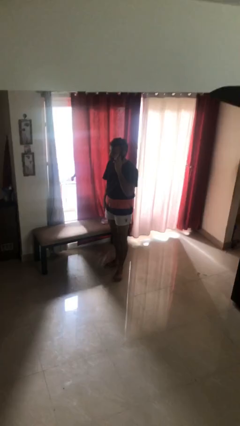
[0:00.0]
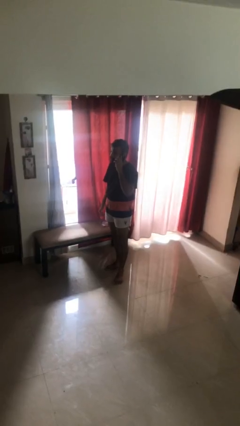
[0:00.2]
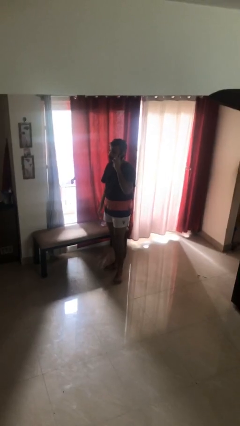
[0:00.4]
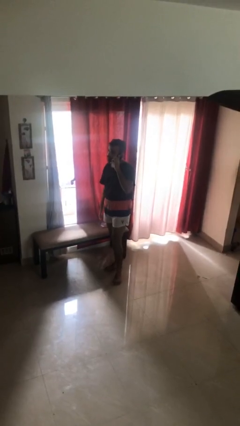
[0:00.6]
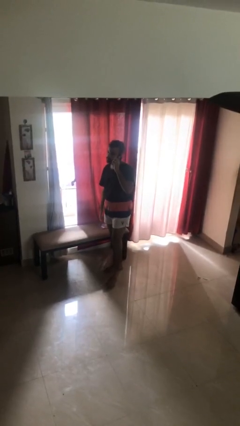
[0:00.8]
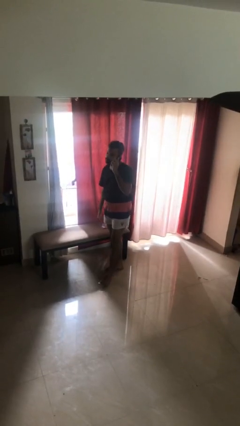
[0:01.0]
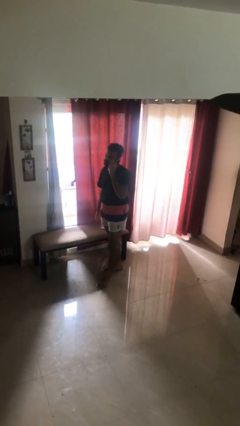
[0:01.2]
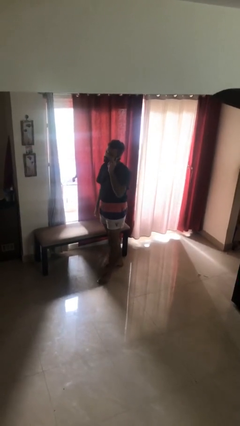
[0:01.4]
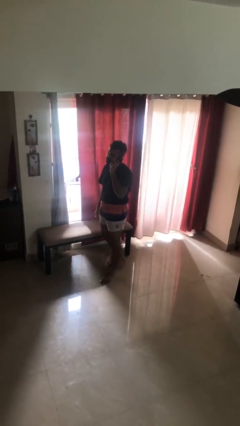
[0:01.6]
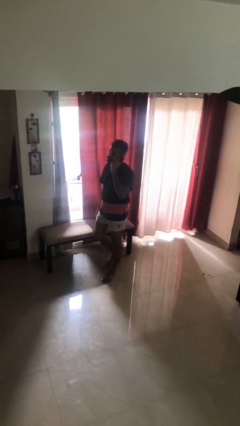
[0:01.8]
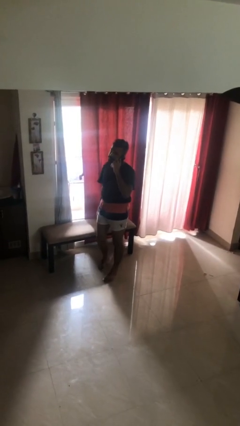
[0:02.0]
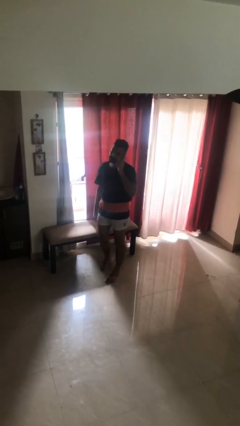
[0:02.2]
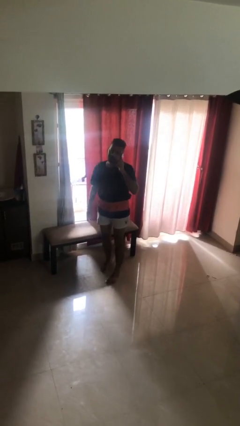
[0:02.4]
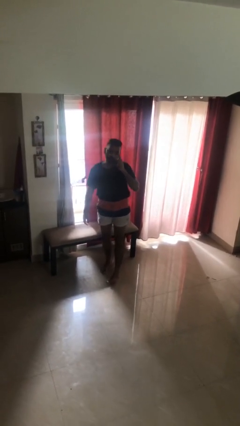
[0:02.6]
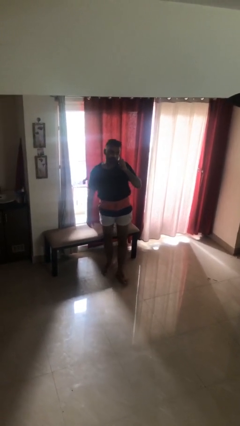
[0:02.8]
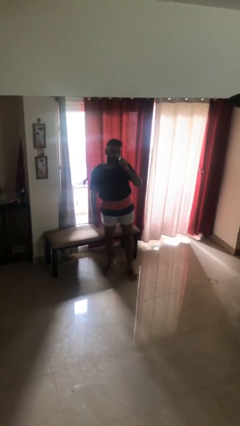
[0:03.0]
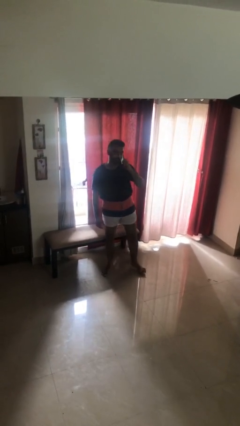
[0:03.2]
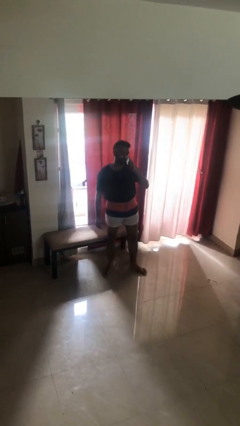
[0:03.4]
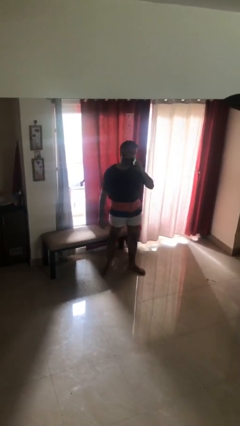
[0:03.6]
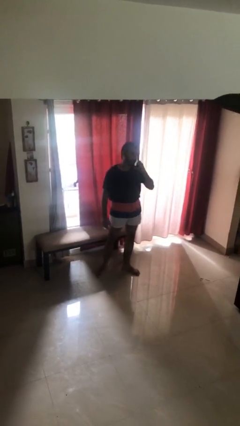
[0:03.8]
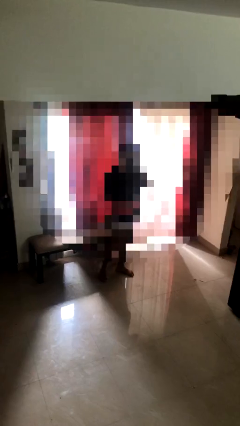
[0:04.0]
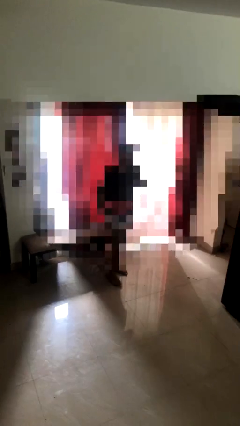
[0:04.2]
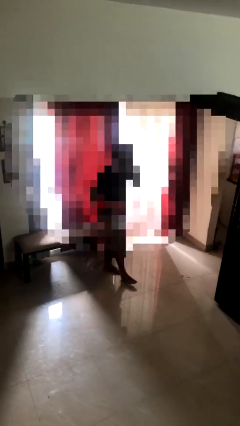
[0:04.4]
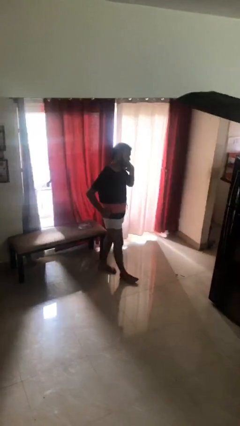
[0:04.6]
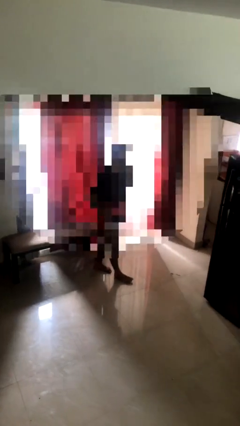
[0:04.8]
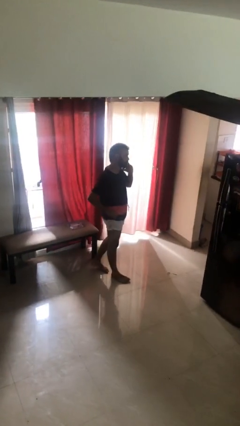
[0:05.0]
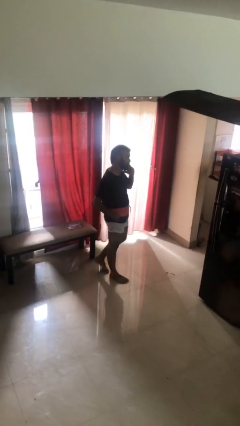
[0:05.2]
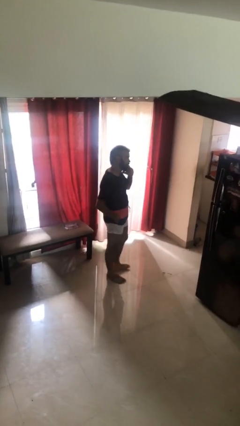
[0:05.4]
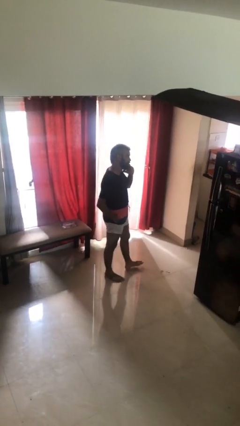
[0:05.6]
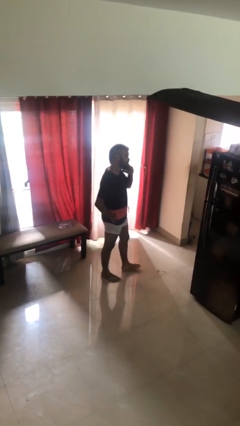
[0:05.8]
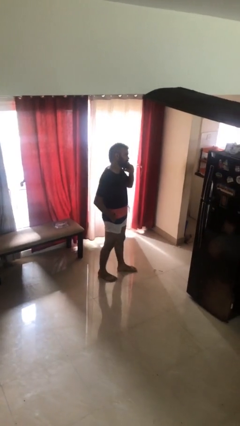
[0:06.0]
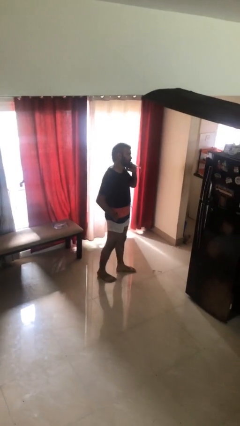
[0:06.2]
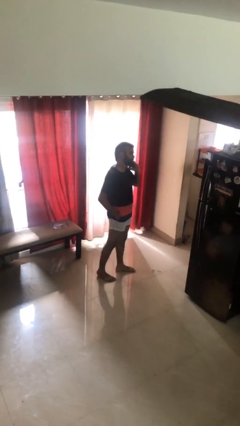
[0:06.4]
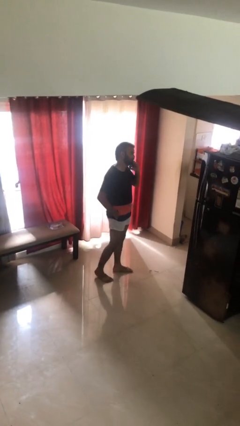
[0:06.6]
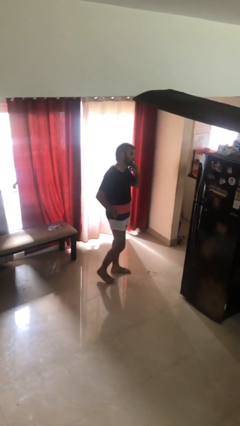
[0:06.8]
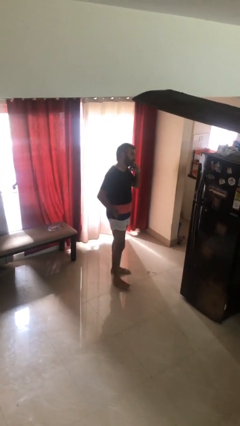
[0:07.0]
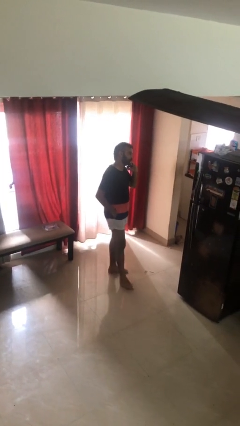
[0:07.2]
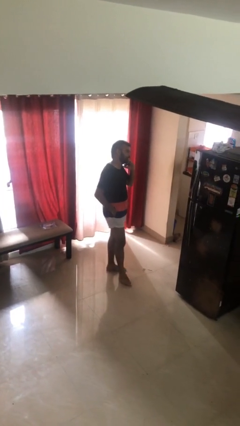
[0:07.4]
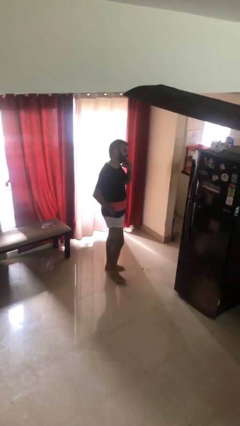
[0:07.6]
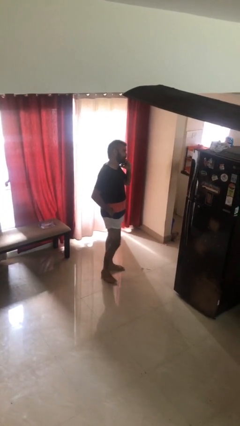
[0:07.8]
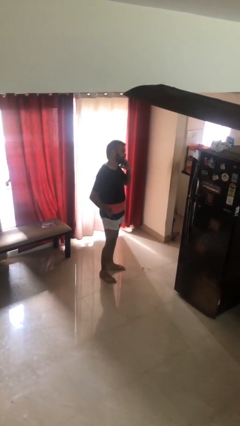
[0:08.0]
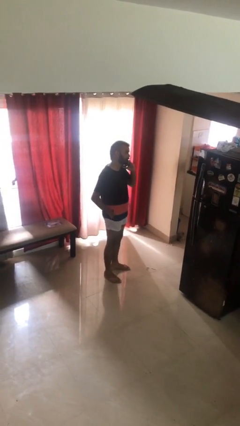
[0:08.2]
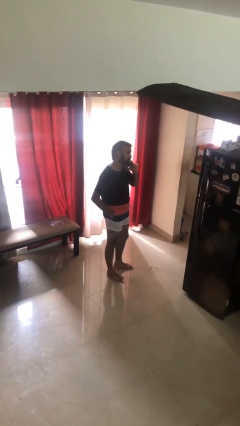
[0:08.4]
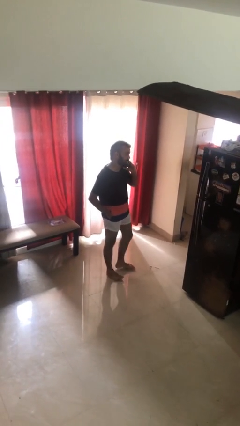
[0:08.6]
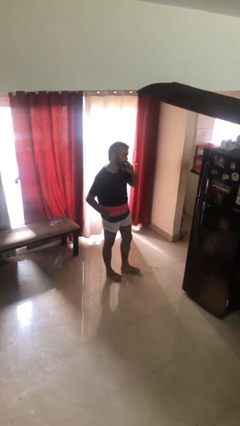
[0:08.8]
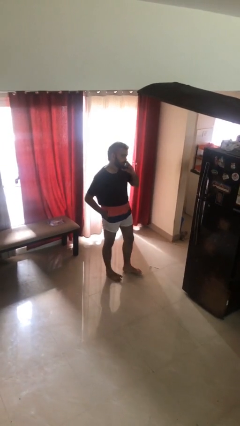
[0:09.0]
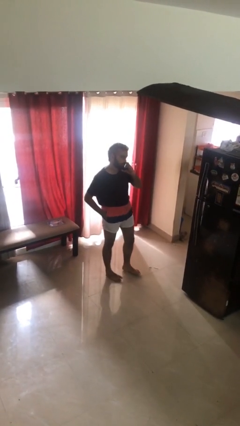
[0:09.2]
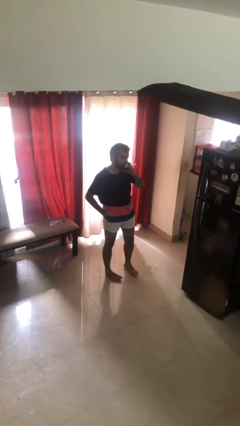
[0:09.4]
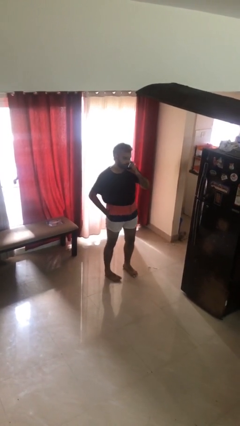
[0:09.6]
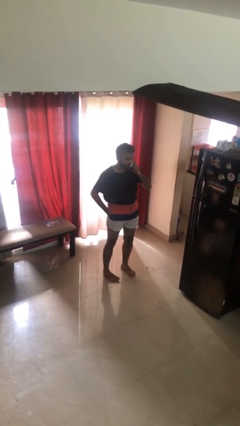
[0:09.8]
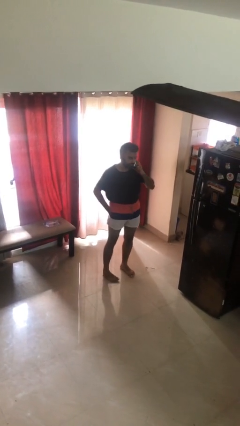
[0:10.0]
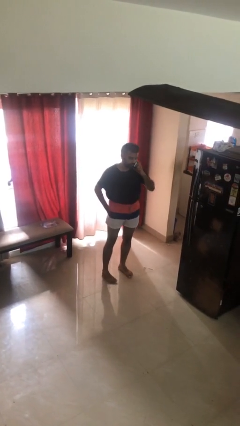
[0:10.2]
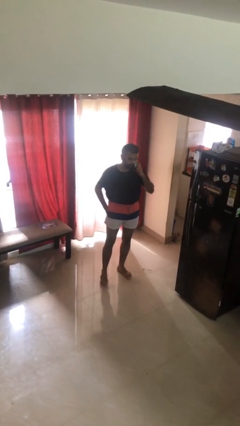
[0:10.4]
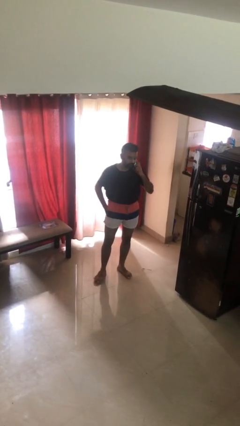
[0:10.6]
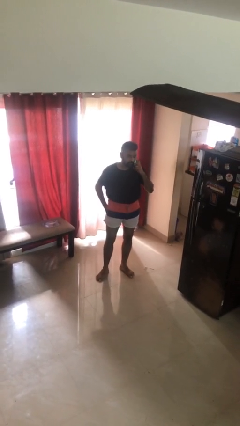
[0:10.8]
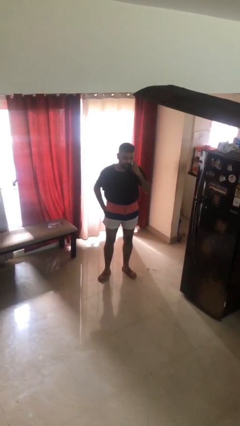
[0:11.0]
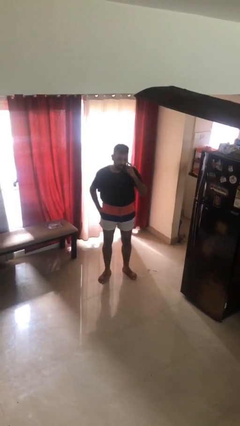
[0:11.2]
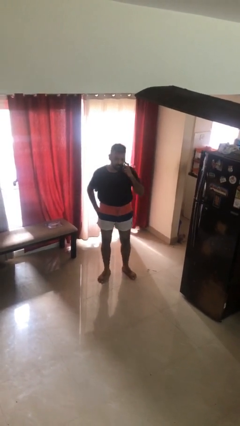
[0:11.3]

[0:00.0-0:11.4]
person talks on phone

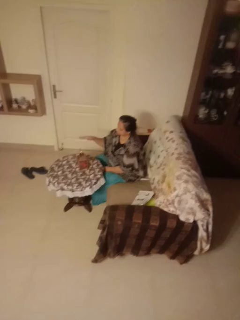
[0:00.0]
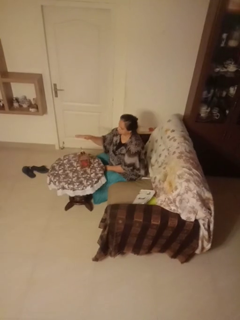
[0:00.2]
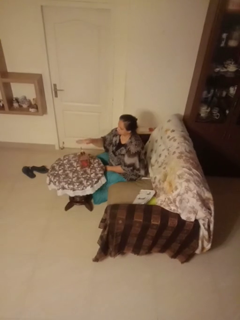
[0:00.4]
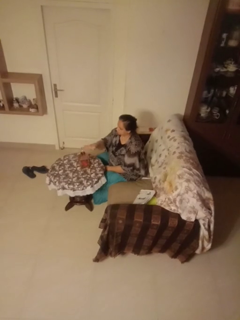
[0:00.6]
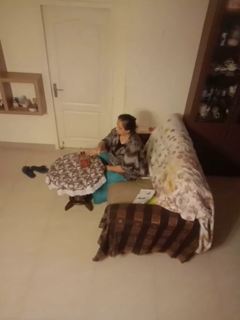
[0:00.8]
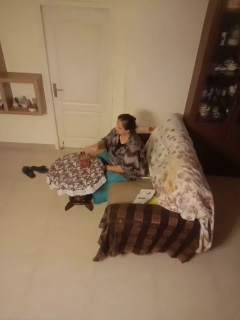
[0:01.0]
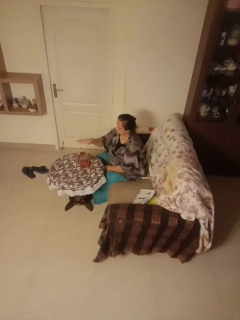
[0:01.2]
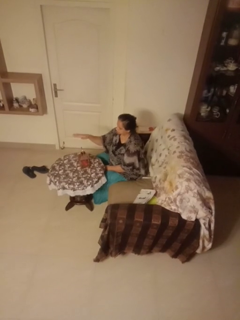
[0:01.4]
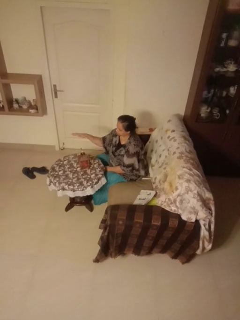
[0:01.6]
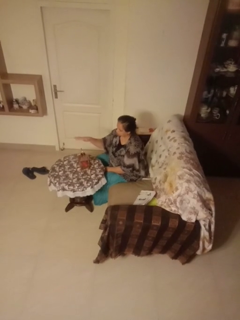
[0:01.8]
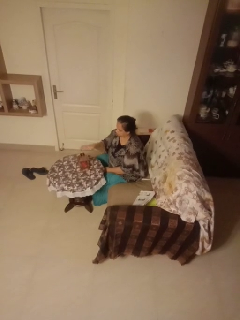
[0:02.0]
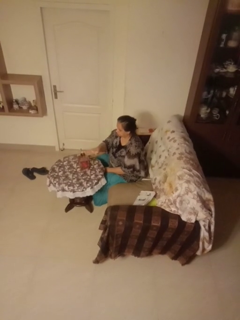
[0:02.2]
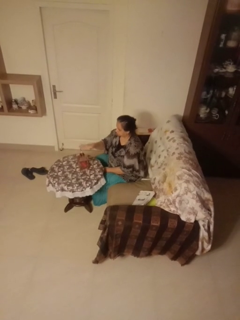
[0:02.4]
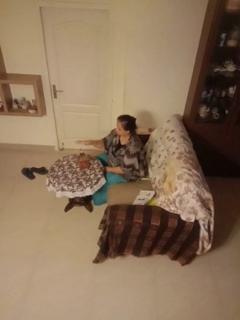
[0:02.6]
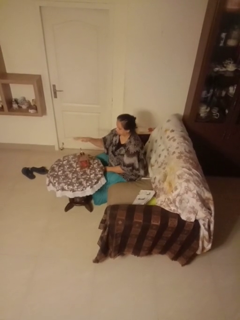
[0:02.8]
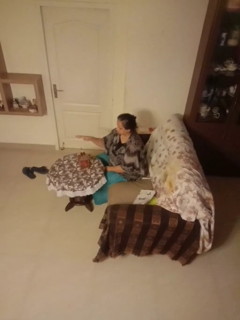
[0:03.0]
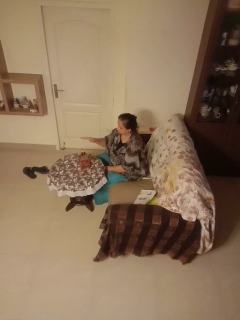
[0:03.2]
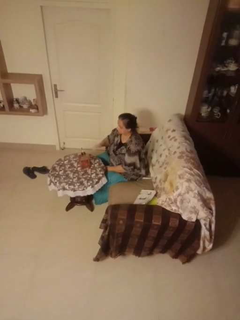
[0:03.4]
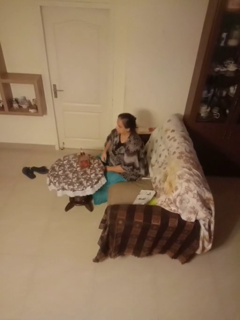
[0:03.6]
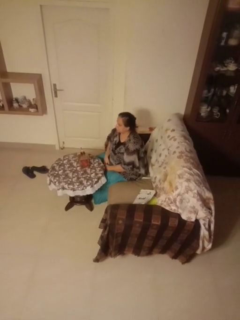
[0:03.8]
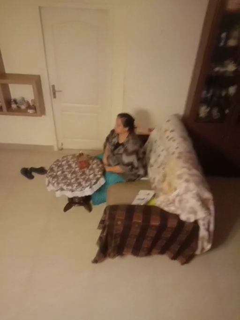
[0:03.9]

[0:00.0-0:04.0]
person waves hand over object

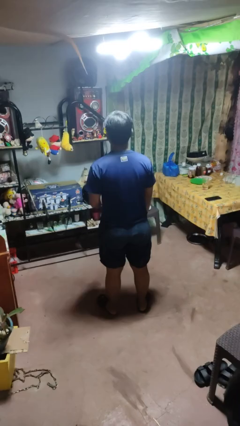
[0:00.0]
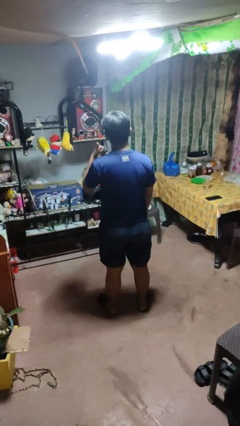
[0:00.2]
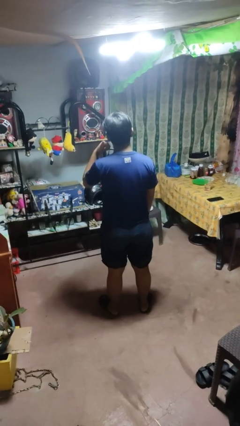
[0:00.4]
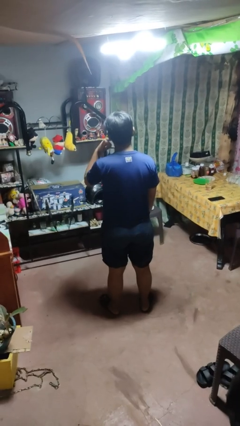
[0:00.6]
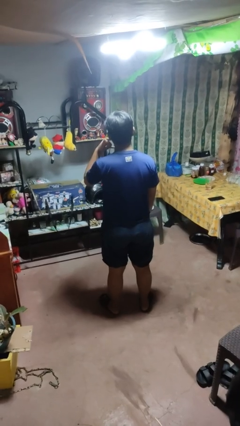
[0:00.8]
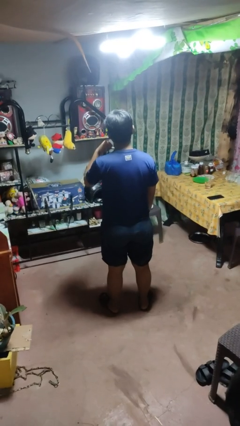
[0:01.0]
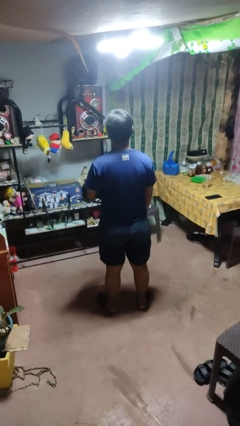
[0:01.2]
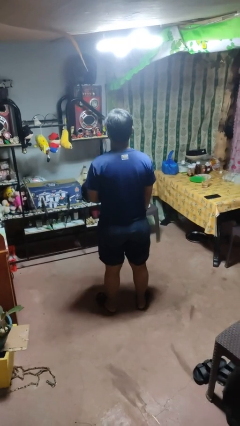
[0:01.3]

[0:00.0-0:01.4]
person gestures call me

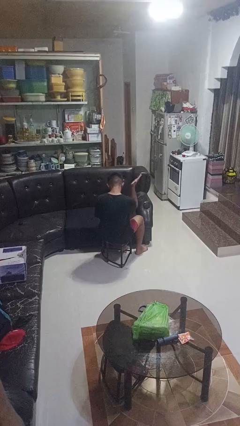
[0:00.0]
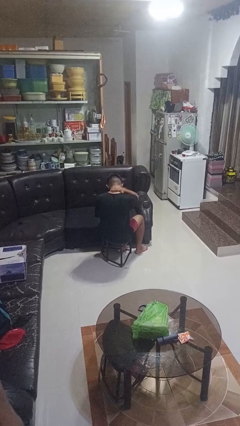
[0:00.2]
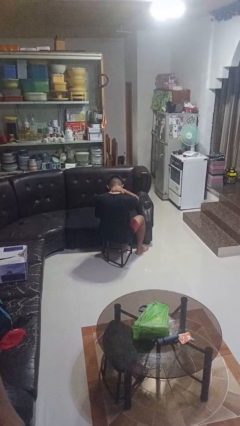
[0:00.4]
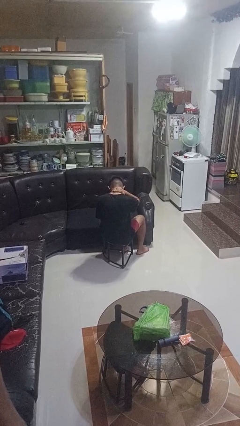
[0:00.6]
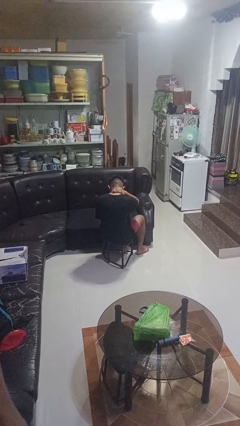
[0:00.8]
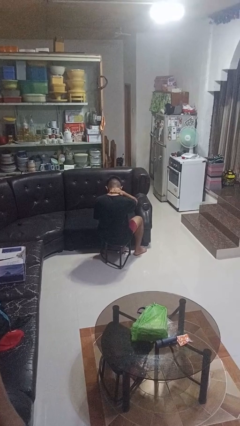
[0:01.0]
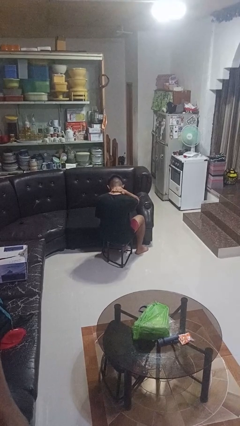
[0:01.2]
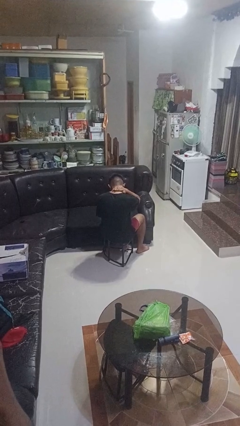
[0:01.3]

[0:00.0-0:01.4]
person swats bug

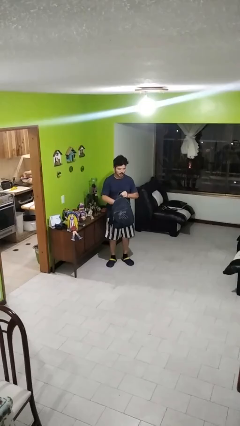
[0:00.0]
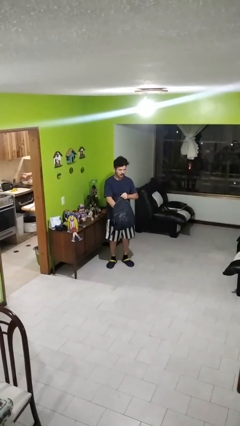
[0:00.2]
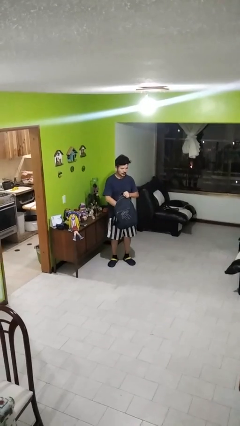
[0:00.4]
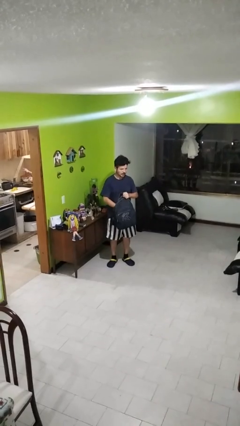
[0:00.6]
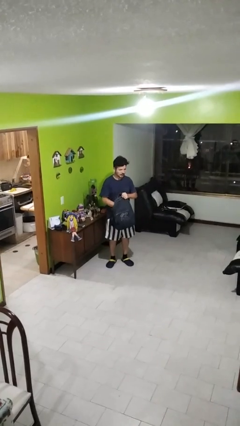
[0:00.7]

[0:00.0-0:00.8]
person searches in backpack
